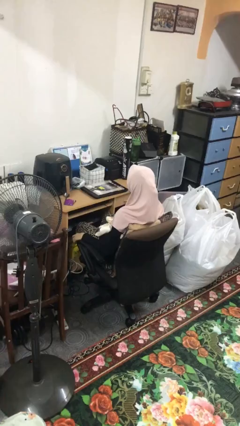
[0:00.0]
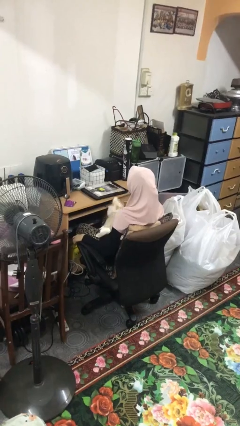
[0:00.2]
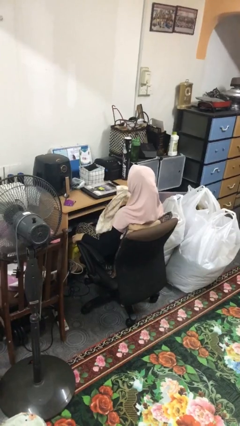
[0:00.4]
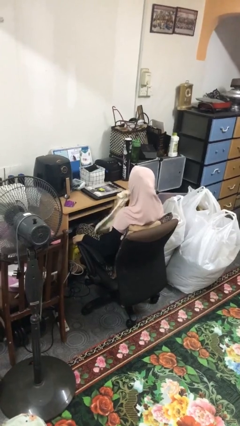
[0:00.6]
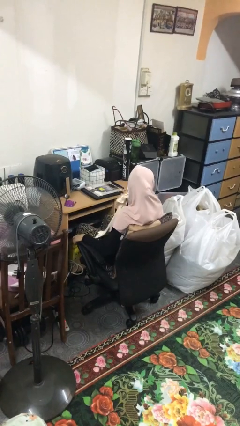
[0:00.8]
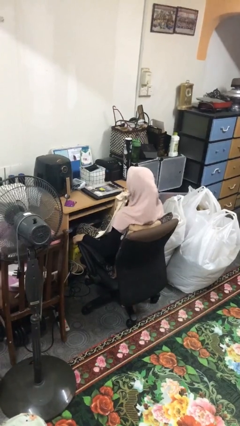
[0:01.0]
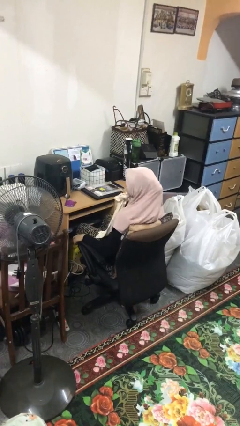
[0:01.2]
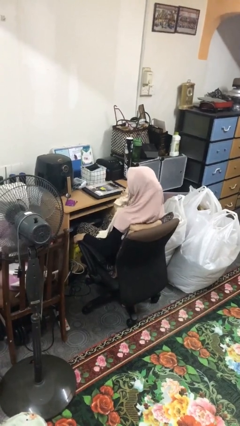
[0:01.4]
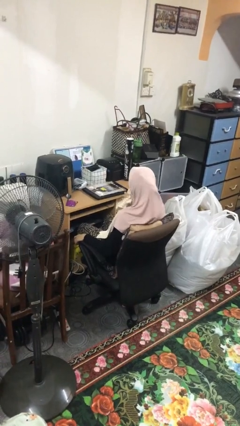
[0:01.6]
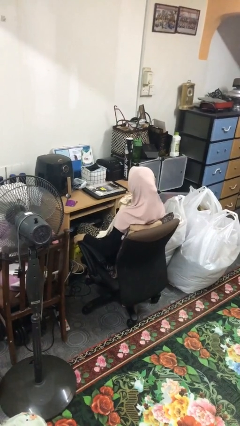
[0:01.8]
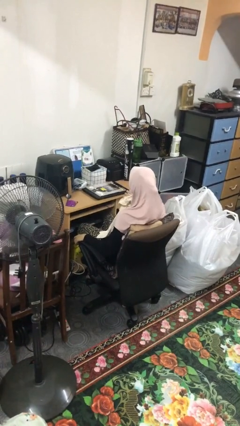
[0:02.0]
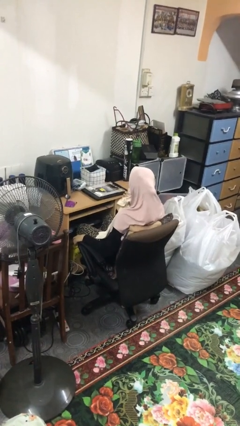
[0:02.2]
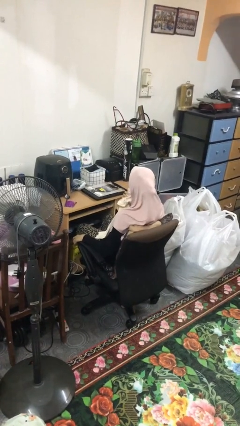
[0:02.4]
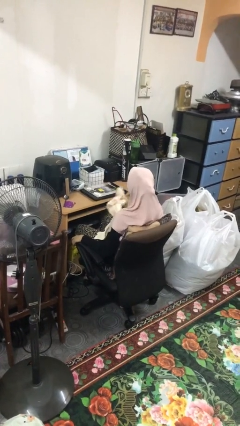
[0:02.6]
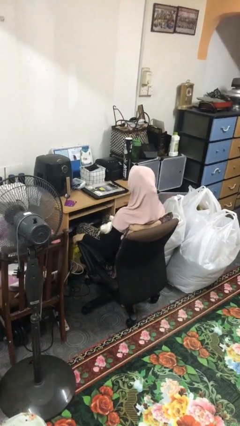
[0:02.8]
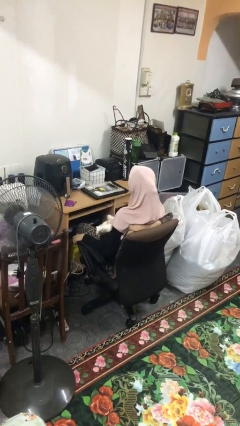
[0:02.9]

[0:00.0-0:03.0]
person wipes mouth with napkin

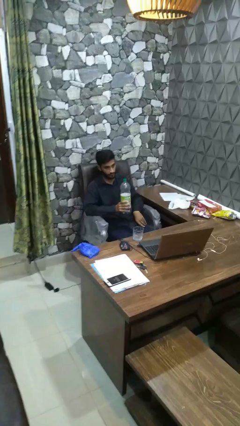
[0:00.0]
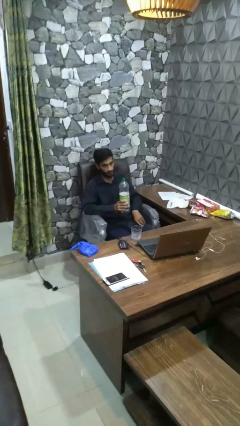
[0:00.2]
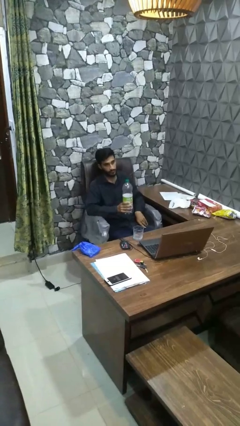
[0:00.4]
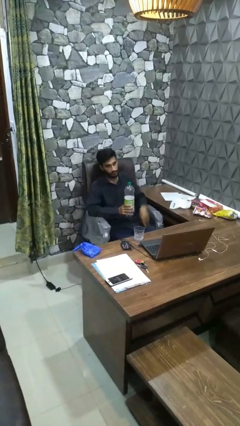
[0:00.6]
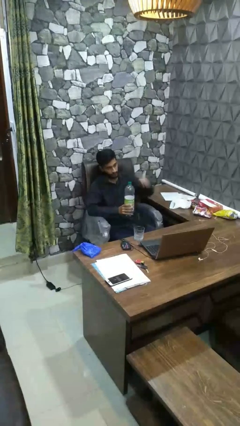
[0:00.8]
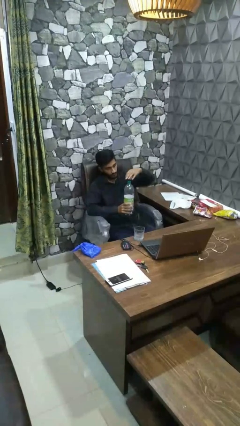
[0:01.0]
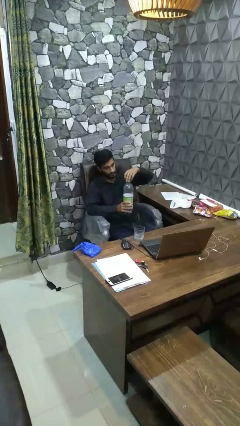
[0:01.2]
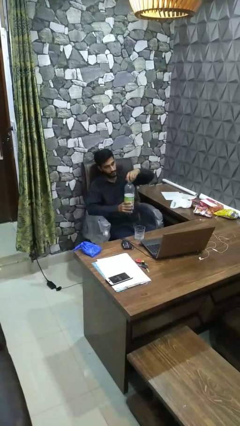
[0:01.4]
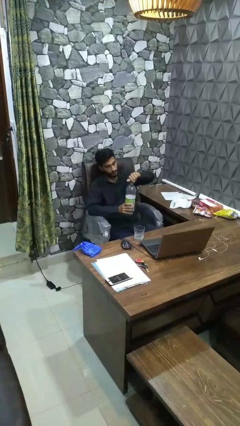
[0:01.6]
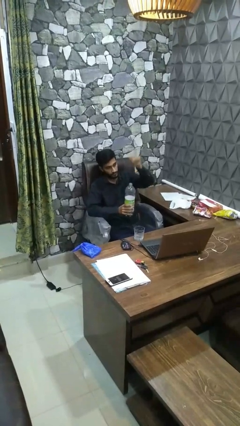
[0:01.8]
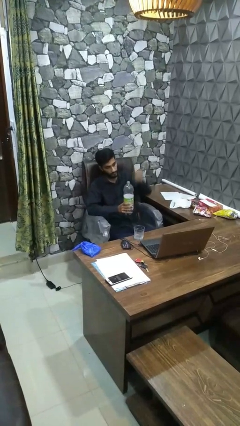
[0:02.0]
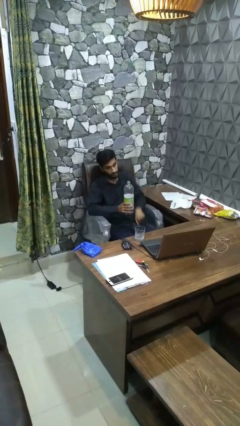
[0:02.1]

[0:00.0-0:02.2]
person unscrews lid from bottle

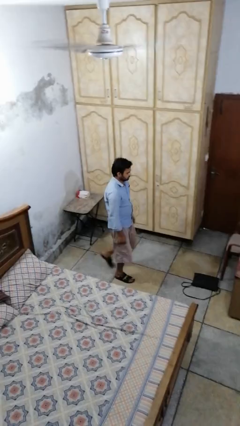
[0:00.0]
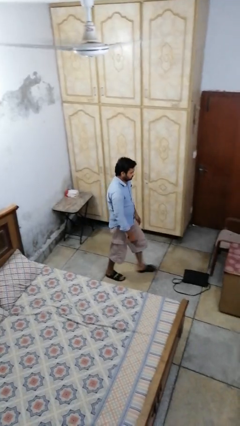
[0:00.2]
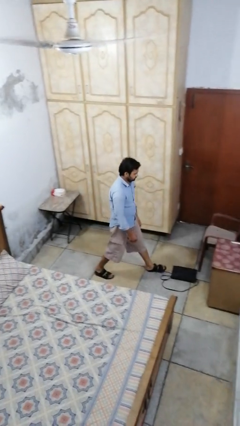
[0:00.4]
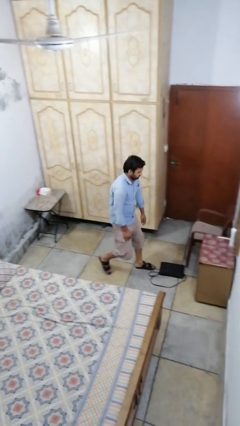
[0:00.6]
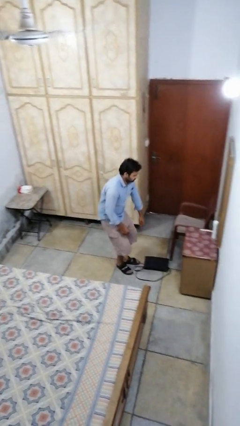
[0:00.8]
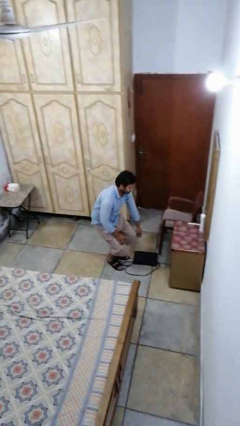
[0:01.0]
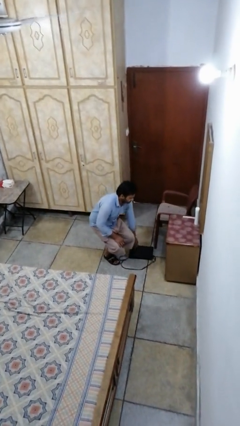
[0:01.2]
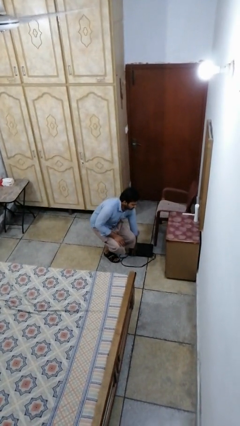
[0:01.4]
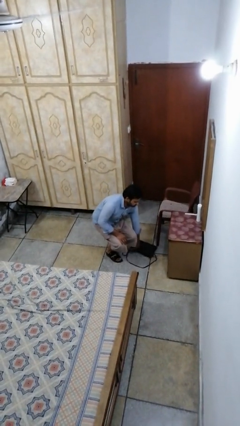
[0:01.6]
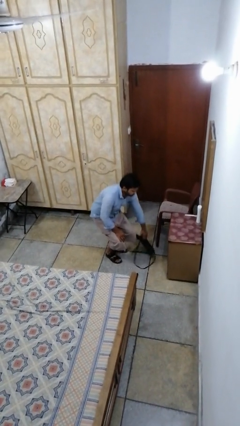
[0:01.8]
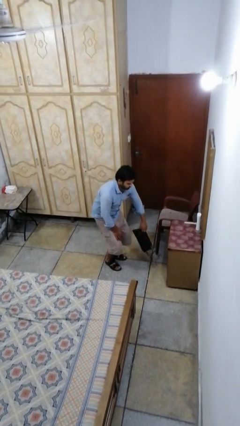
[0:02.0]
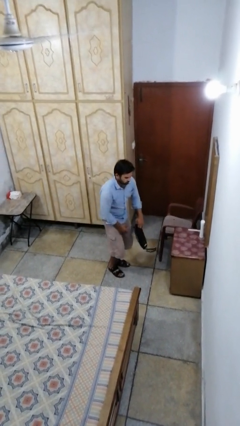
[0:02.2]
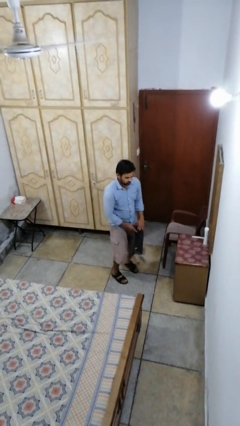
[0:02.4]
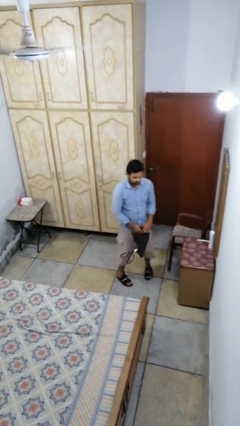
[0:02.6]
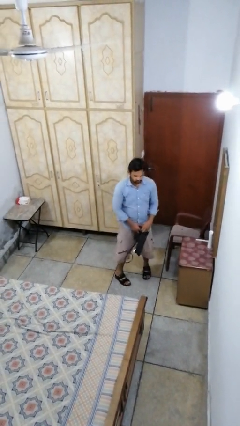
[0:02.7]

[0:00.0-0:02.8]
person picks up object from floor

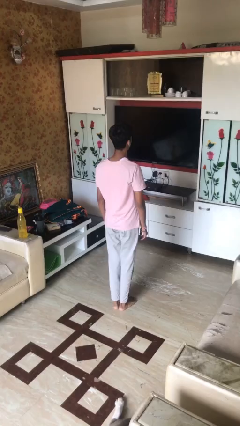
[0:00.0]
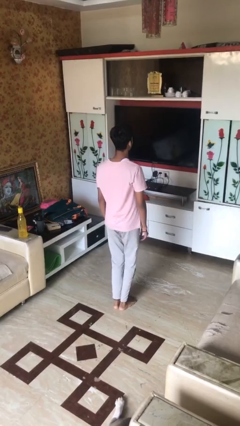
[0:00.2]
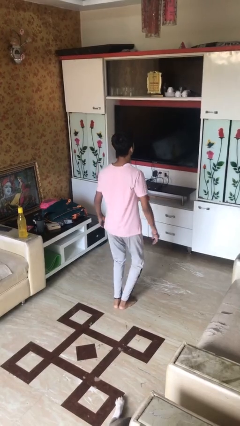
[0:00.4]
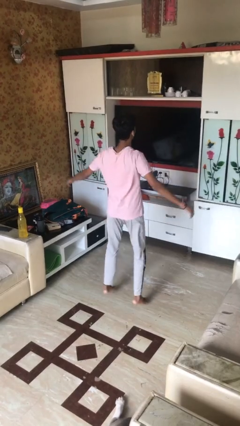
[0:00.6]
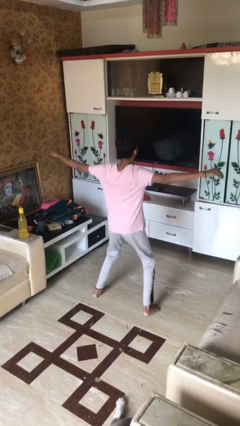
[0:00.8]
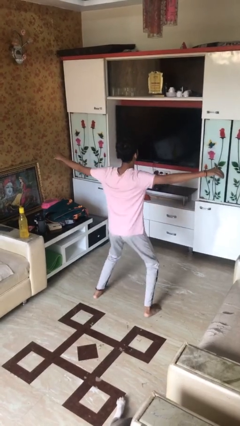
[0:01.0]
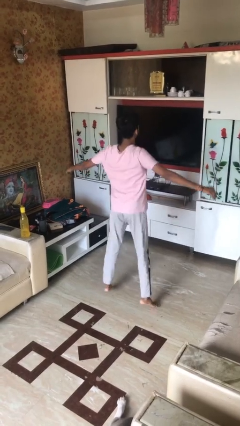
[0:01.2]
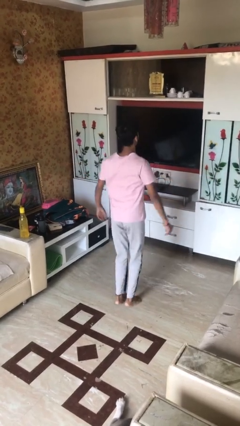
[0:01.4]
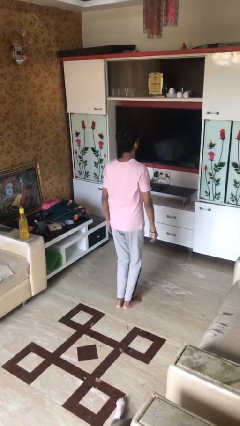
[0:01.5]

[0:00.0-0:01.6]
person exercises with jumping jacks

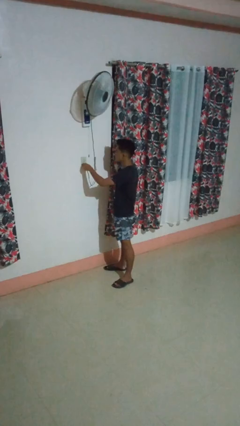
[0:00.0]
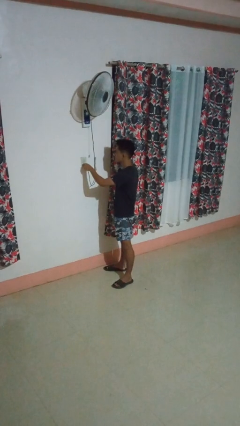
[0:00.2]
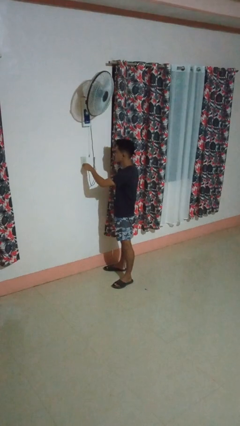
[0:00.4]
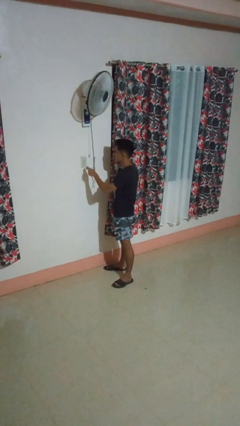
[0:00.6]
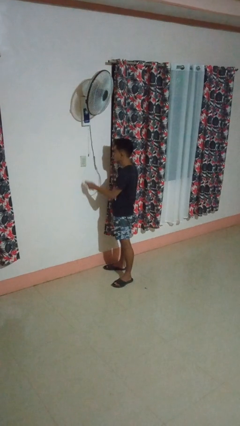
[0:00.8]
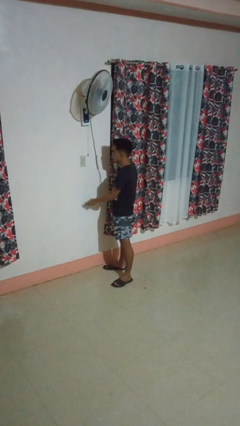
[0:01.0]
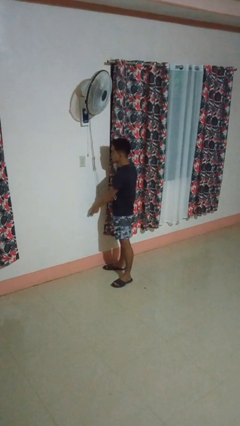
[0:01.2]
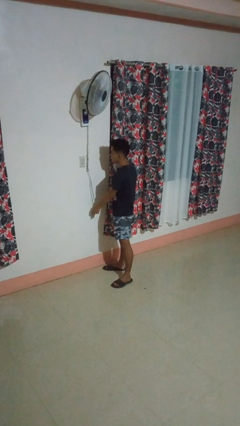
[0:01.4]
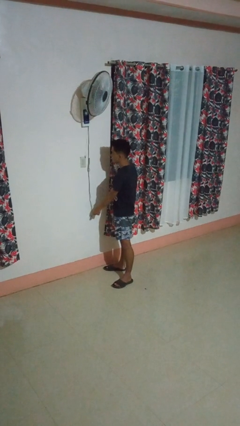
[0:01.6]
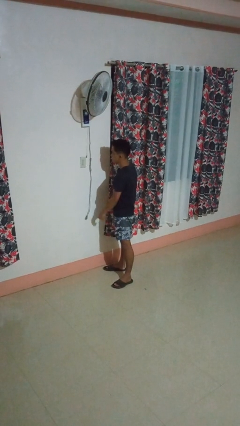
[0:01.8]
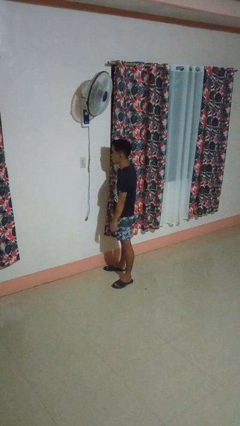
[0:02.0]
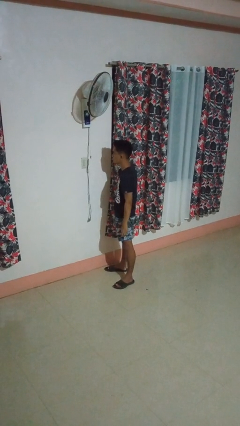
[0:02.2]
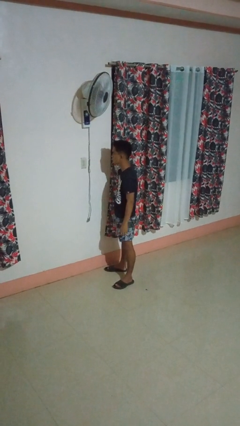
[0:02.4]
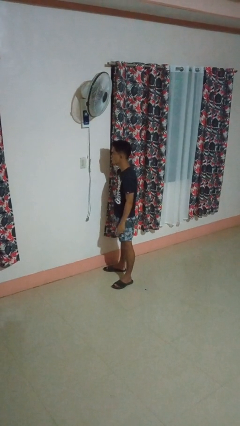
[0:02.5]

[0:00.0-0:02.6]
person unplugs from electrical socket

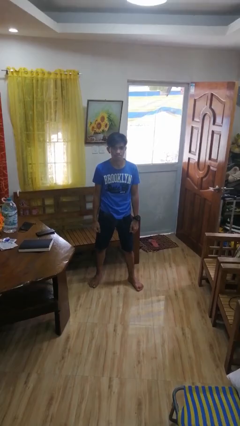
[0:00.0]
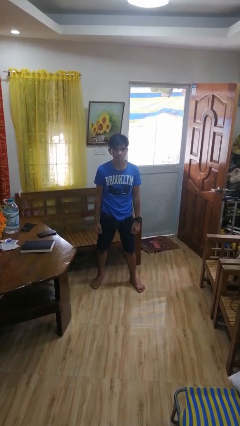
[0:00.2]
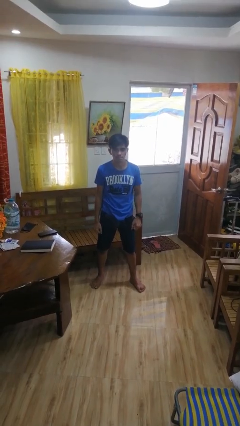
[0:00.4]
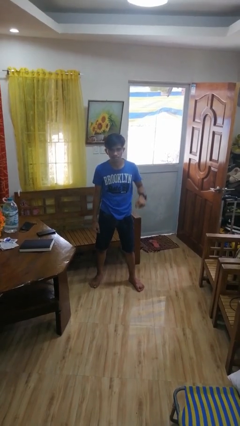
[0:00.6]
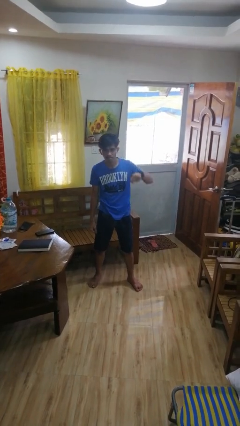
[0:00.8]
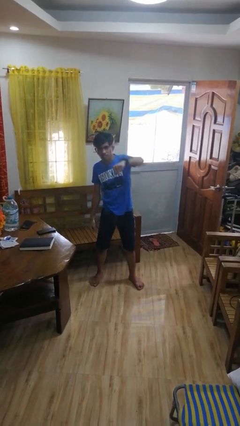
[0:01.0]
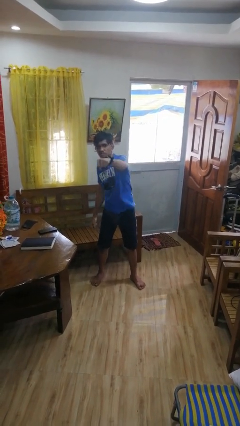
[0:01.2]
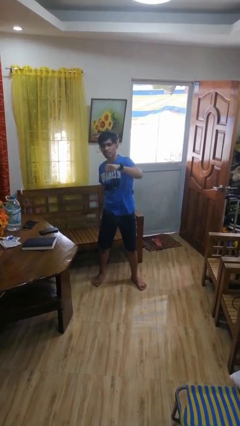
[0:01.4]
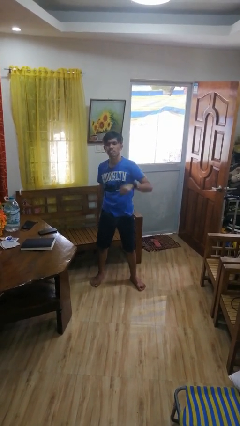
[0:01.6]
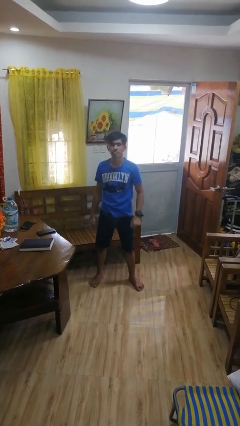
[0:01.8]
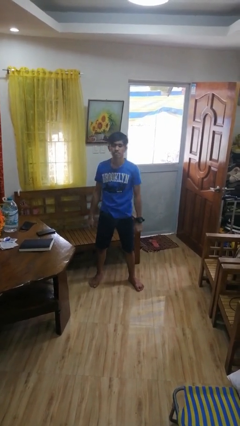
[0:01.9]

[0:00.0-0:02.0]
person punches

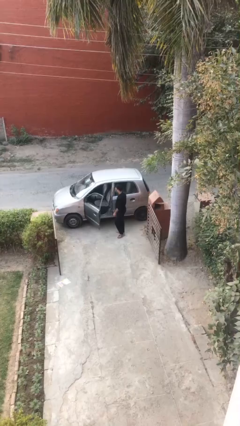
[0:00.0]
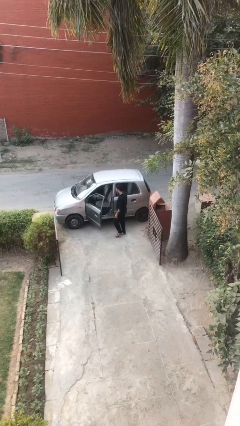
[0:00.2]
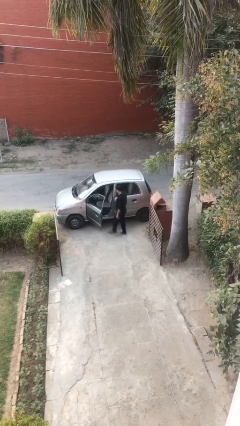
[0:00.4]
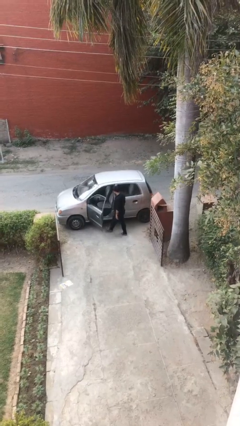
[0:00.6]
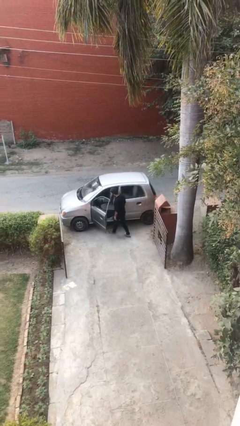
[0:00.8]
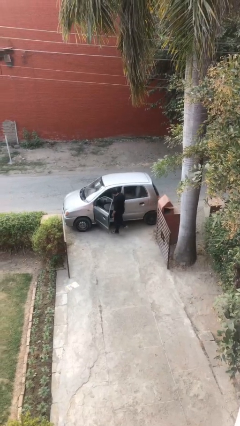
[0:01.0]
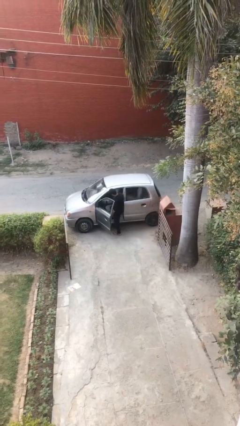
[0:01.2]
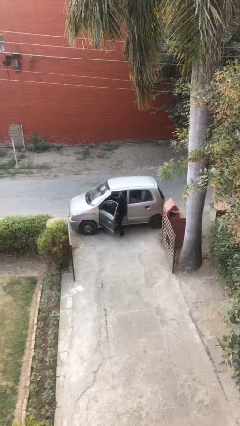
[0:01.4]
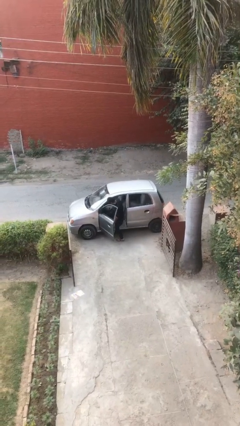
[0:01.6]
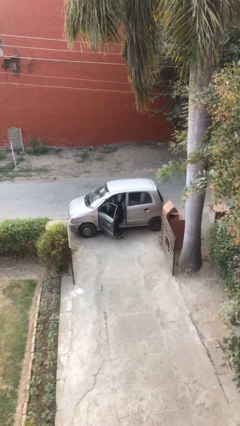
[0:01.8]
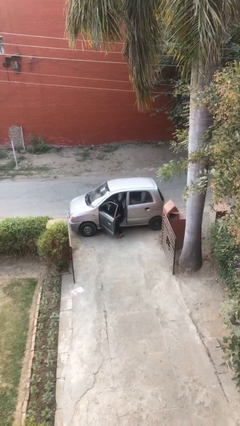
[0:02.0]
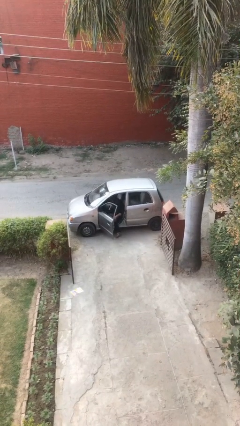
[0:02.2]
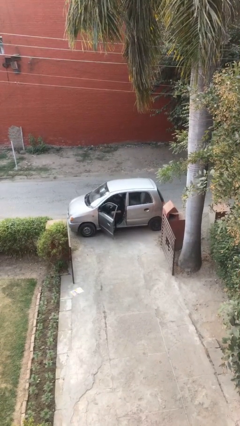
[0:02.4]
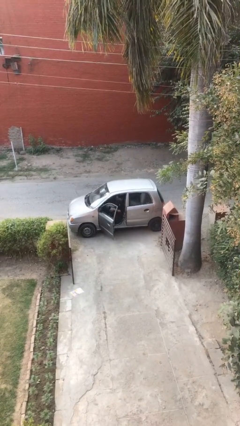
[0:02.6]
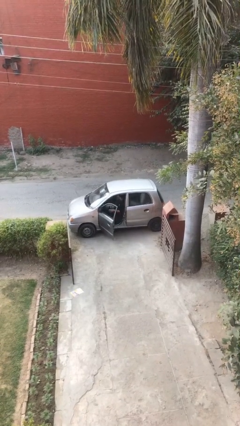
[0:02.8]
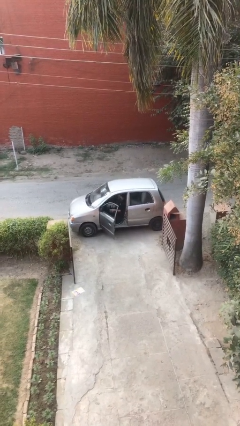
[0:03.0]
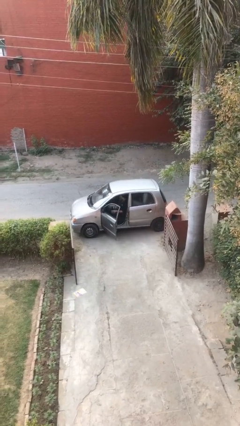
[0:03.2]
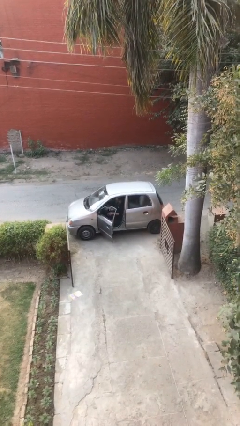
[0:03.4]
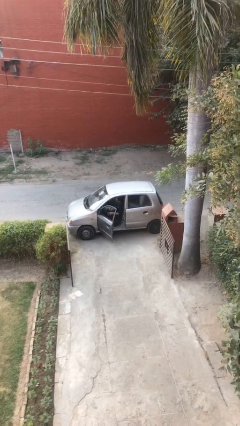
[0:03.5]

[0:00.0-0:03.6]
person enters car
